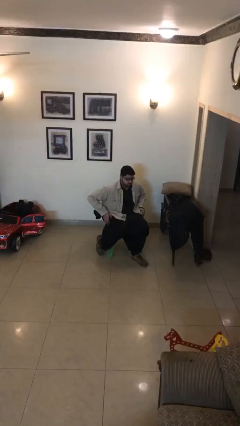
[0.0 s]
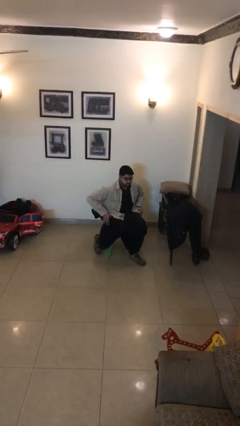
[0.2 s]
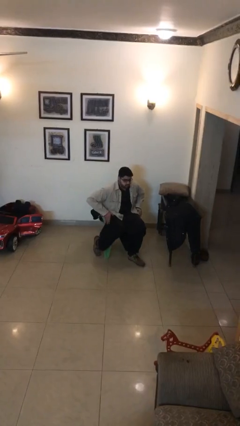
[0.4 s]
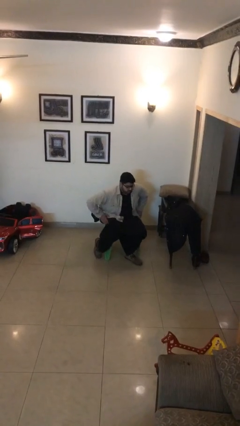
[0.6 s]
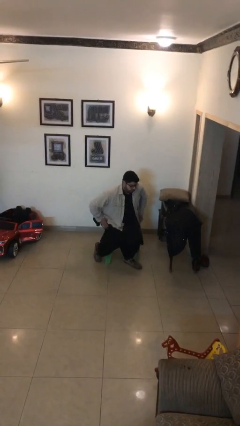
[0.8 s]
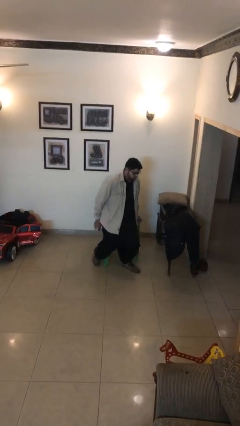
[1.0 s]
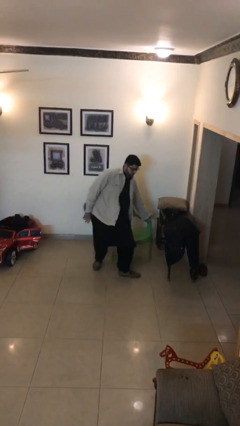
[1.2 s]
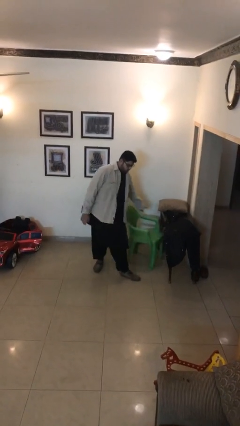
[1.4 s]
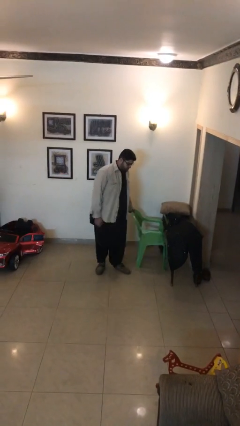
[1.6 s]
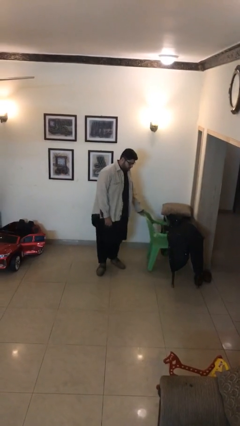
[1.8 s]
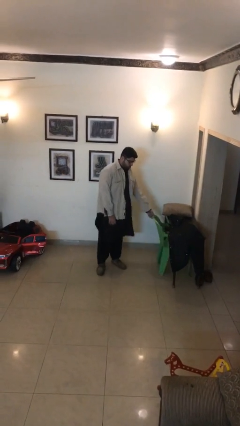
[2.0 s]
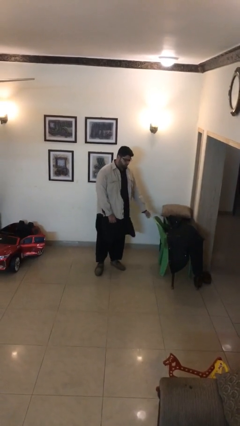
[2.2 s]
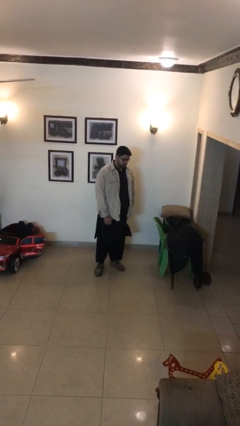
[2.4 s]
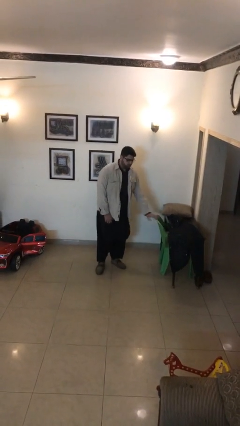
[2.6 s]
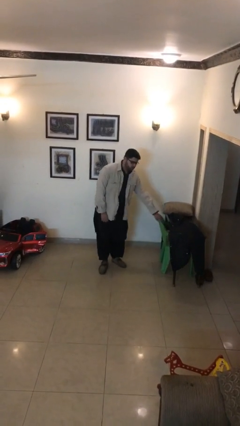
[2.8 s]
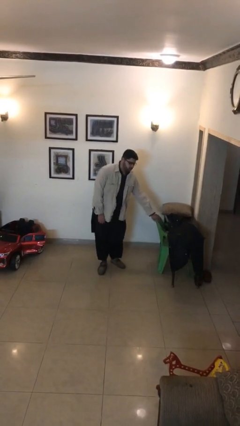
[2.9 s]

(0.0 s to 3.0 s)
person stands up

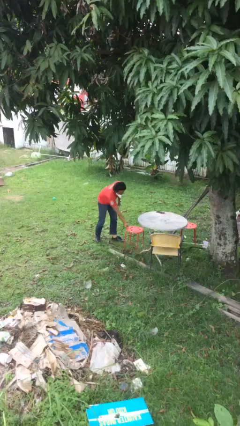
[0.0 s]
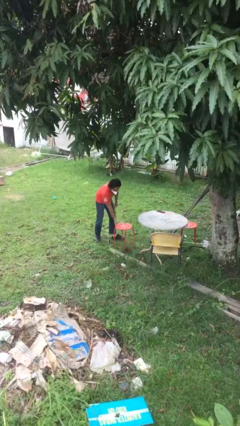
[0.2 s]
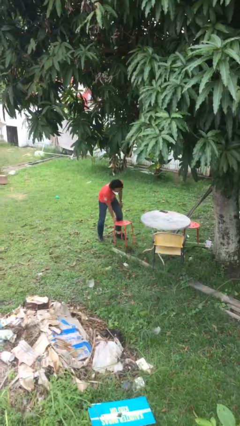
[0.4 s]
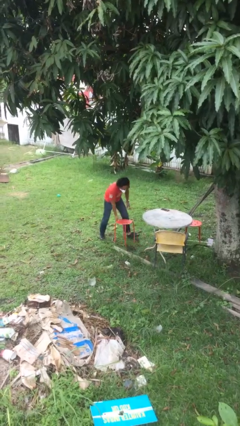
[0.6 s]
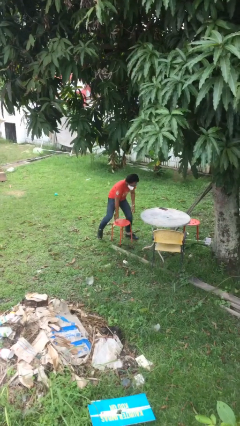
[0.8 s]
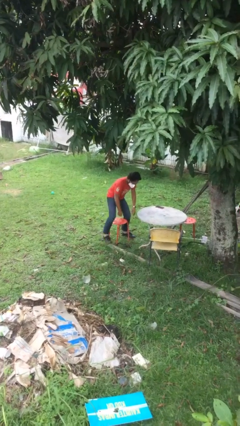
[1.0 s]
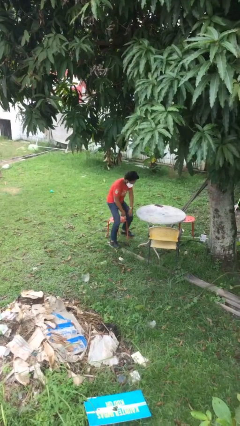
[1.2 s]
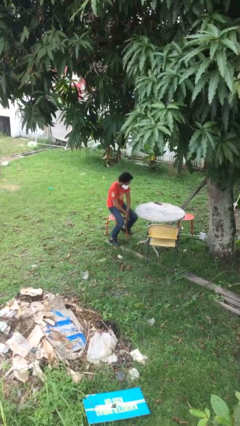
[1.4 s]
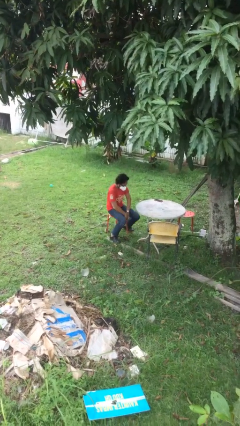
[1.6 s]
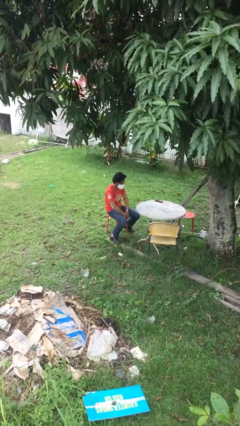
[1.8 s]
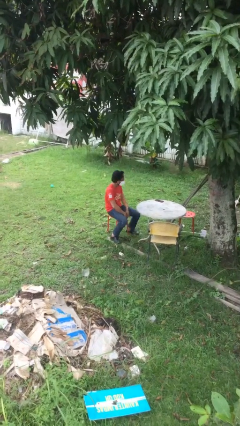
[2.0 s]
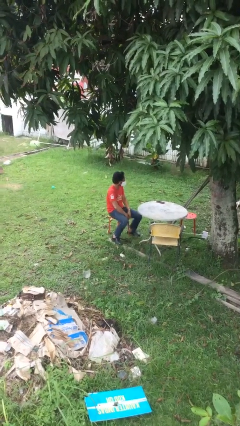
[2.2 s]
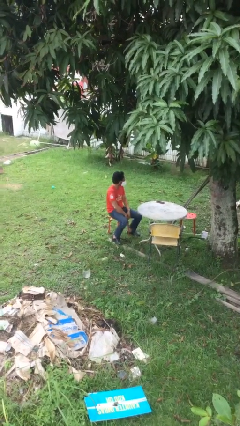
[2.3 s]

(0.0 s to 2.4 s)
person sits down

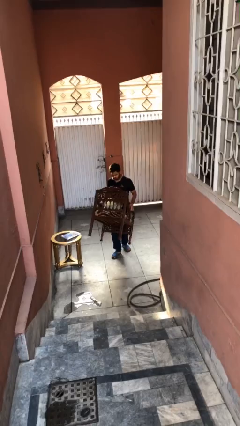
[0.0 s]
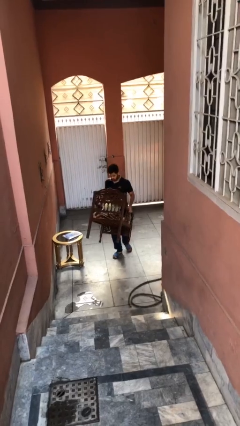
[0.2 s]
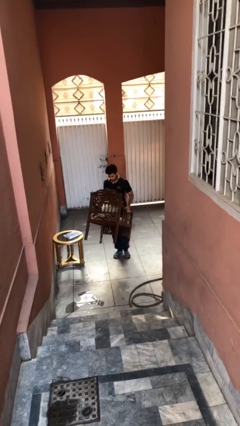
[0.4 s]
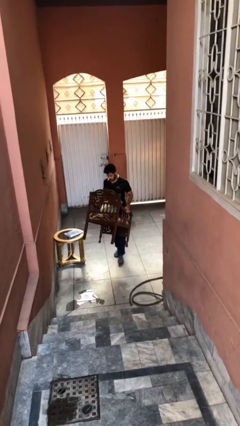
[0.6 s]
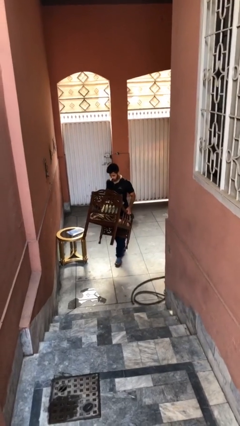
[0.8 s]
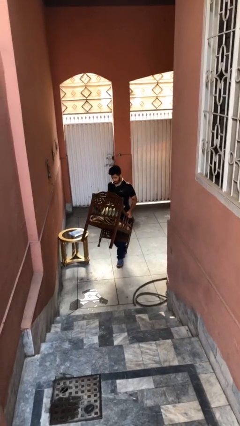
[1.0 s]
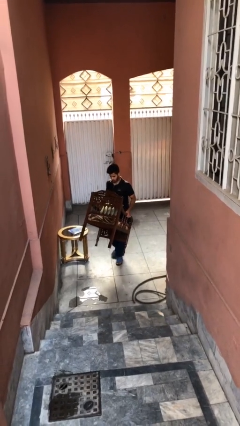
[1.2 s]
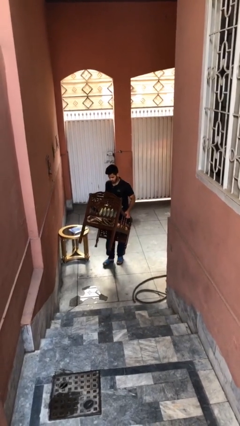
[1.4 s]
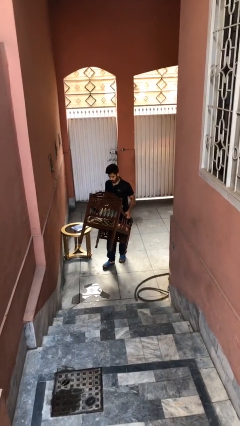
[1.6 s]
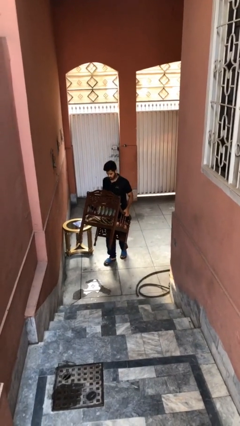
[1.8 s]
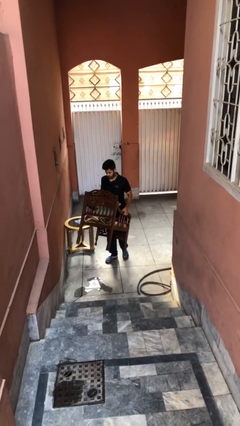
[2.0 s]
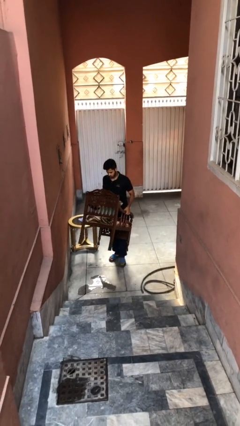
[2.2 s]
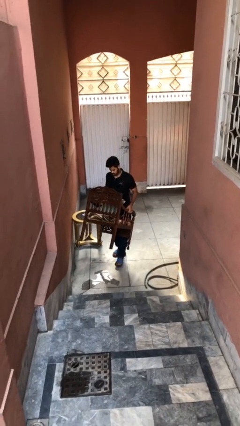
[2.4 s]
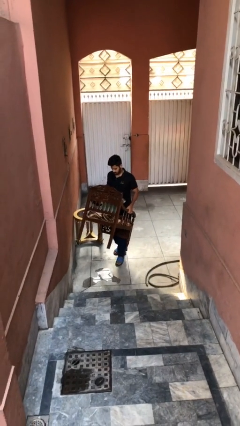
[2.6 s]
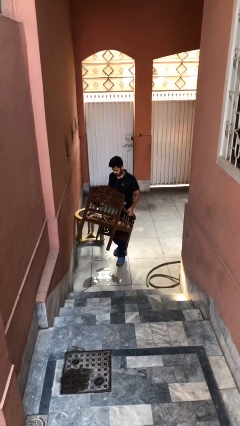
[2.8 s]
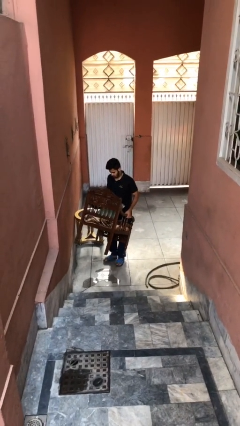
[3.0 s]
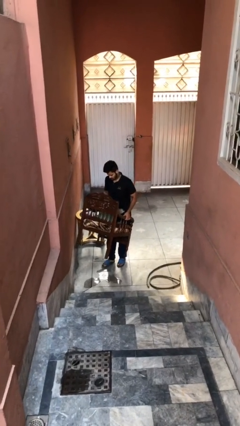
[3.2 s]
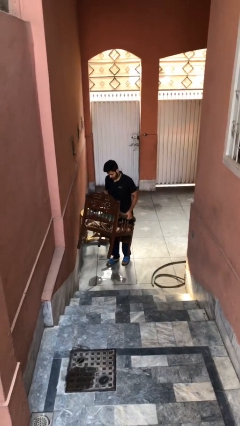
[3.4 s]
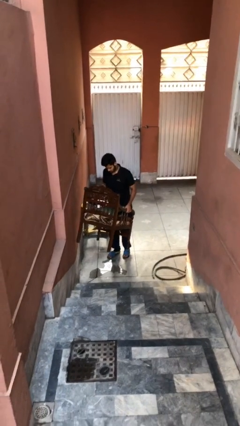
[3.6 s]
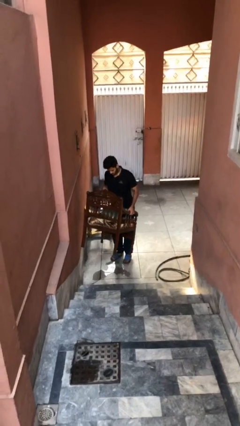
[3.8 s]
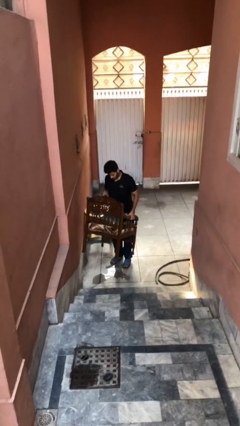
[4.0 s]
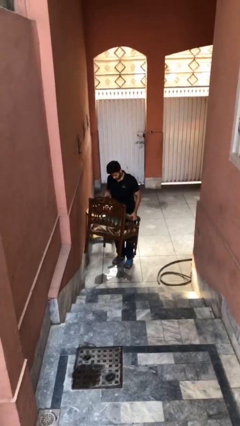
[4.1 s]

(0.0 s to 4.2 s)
person carries heavy object

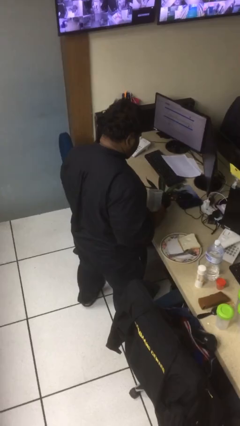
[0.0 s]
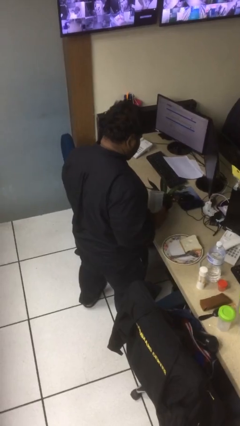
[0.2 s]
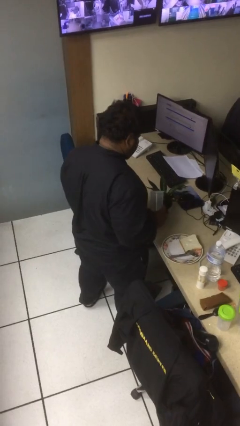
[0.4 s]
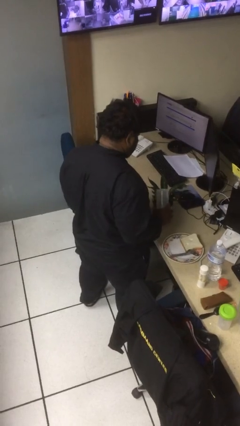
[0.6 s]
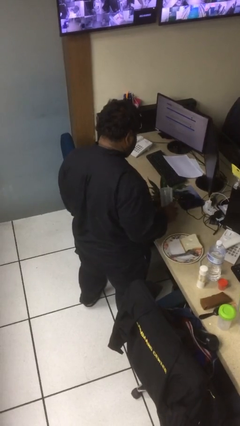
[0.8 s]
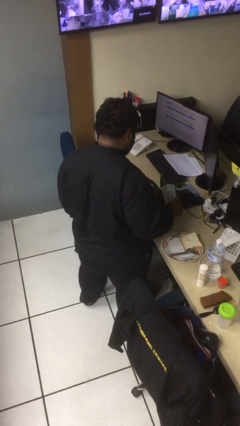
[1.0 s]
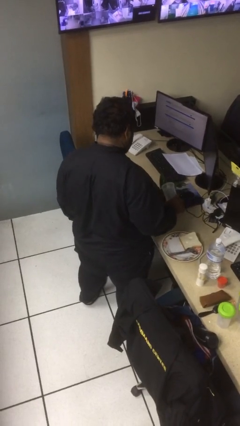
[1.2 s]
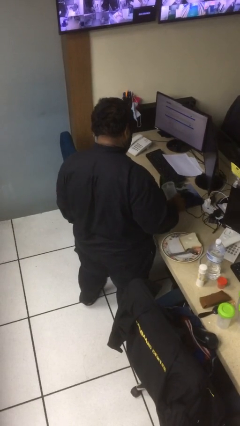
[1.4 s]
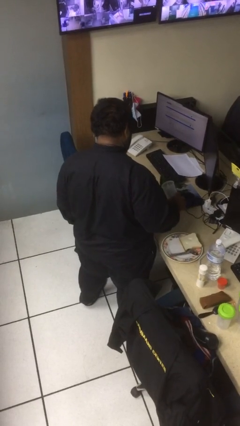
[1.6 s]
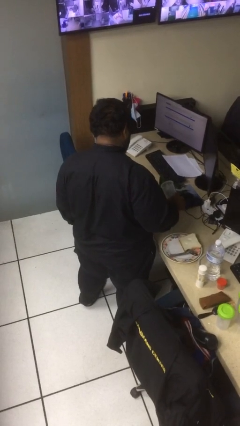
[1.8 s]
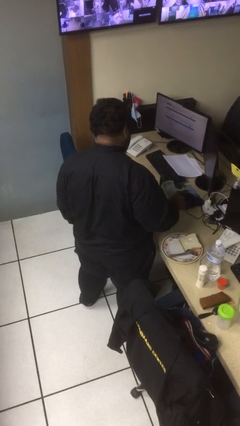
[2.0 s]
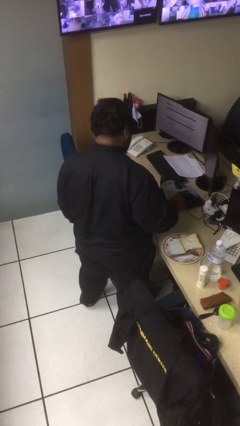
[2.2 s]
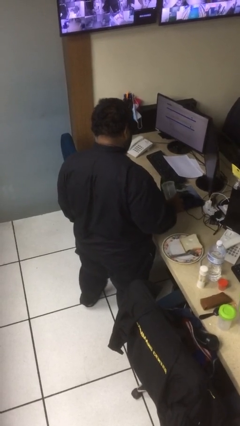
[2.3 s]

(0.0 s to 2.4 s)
person waters houseplant

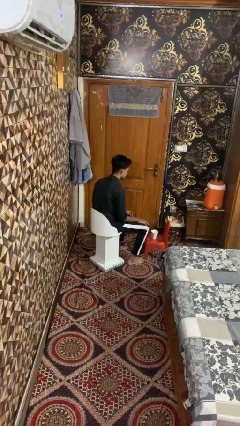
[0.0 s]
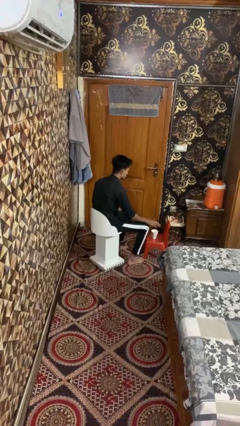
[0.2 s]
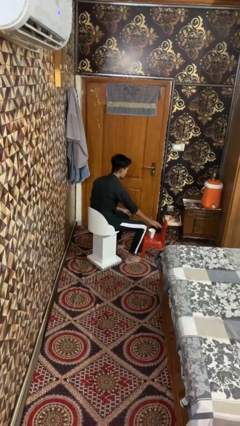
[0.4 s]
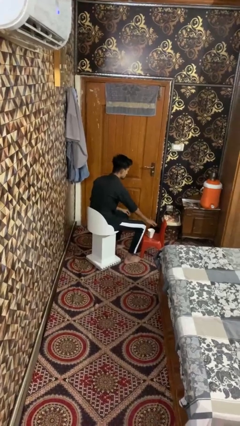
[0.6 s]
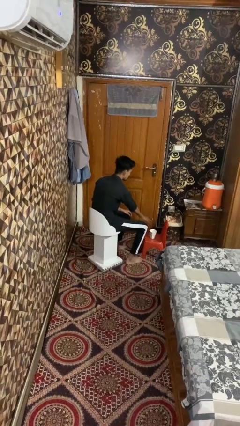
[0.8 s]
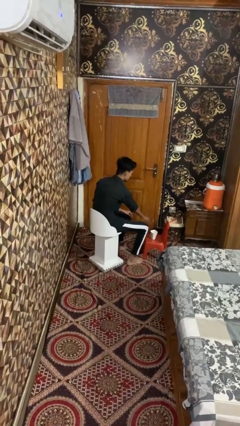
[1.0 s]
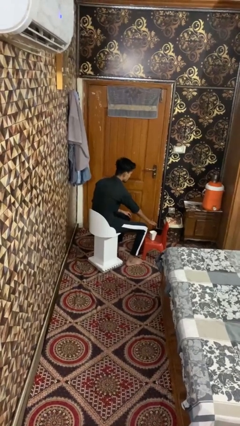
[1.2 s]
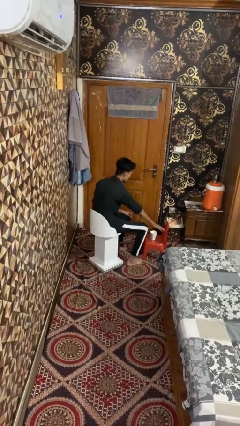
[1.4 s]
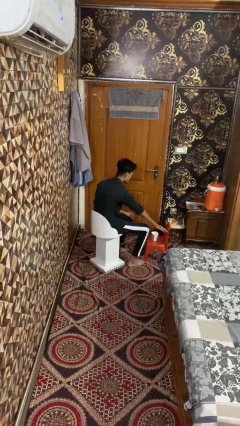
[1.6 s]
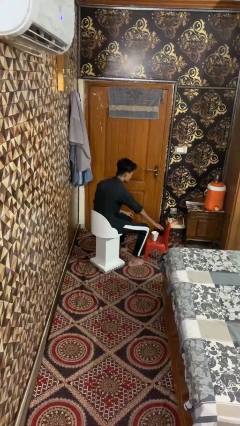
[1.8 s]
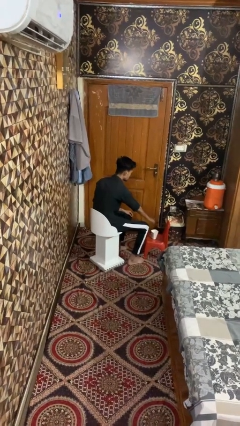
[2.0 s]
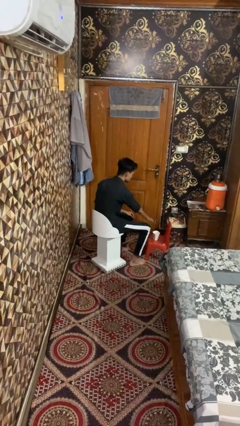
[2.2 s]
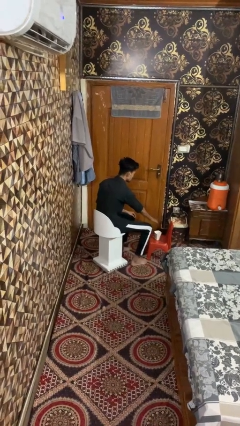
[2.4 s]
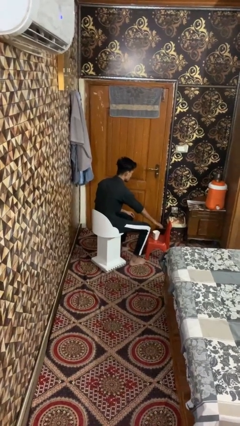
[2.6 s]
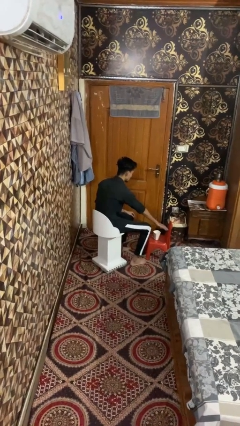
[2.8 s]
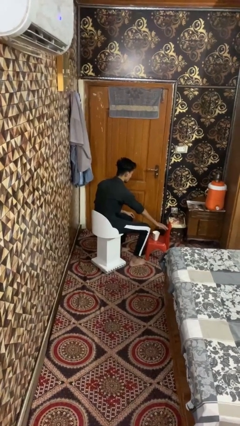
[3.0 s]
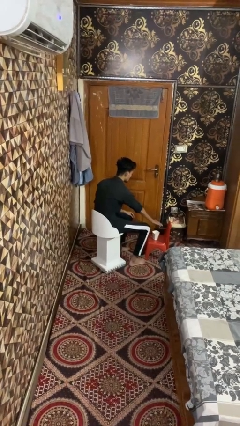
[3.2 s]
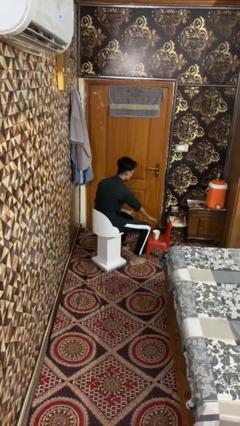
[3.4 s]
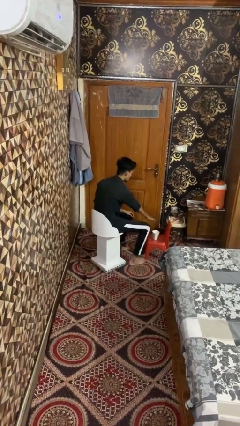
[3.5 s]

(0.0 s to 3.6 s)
person waves hand over object

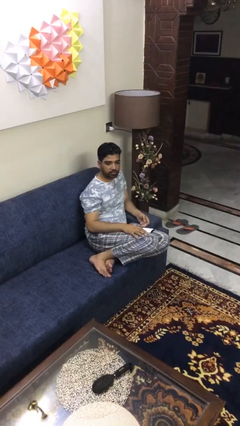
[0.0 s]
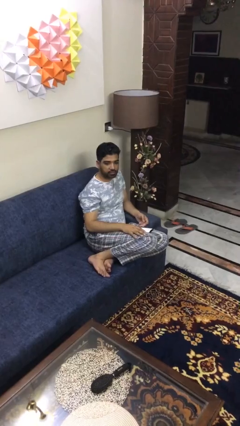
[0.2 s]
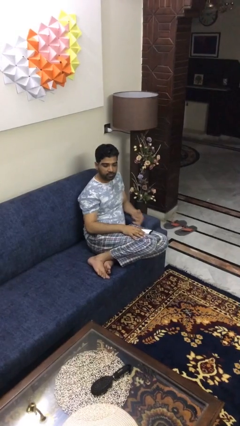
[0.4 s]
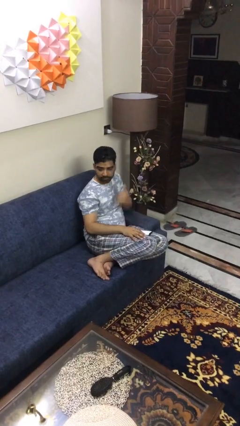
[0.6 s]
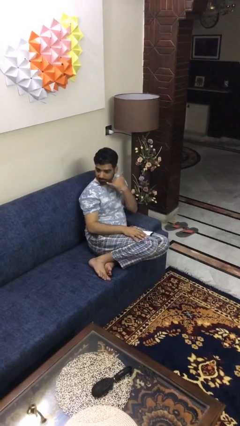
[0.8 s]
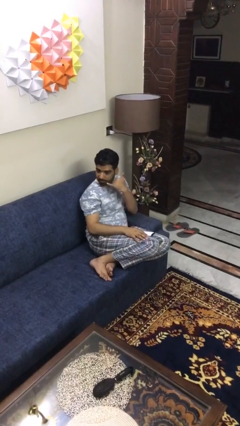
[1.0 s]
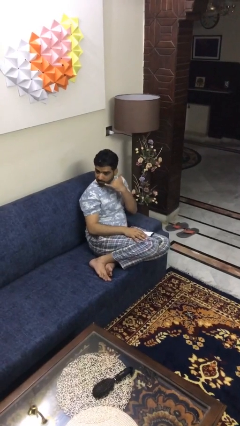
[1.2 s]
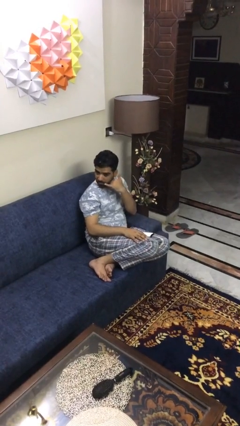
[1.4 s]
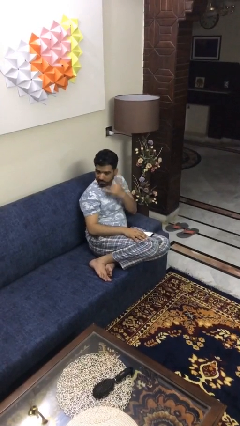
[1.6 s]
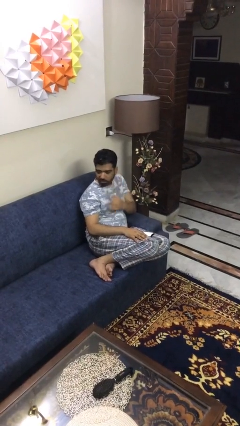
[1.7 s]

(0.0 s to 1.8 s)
person gestures call me

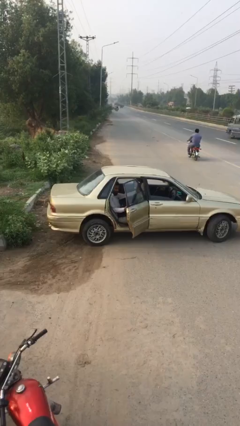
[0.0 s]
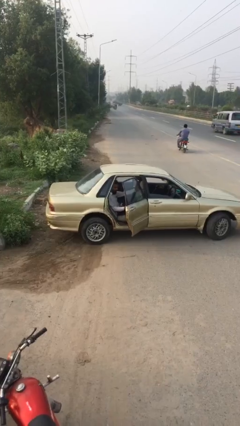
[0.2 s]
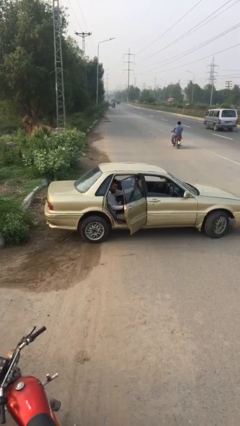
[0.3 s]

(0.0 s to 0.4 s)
person closes car door
